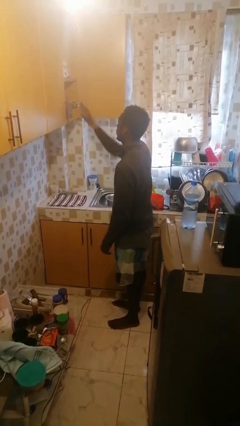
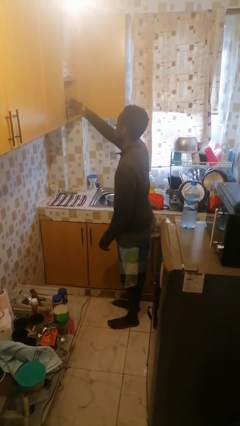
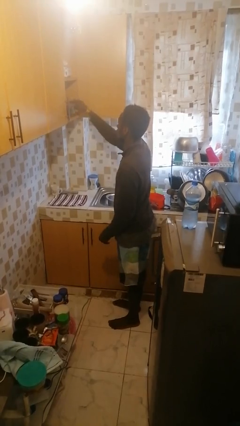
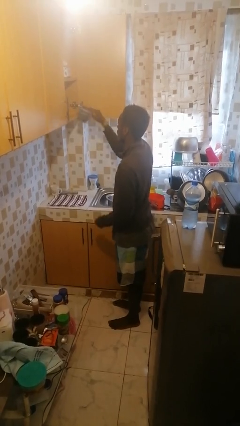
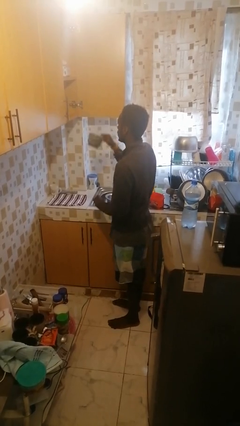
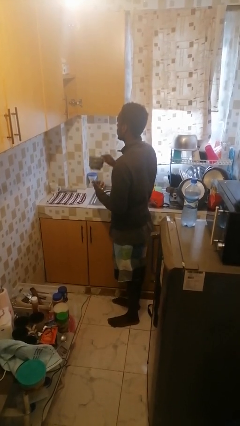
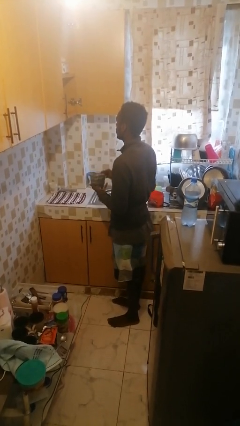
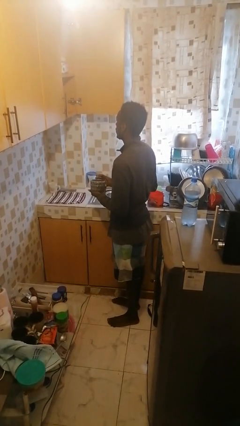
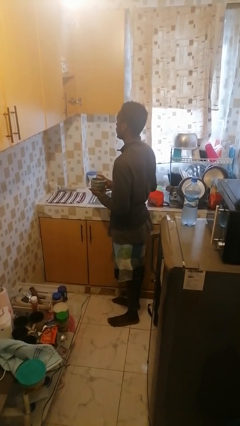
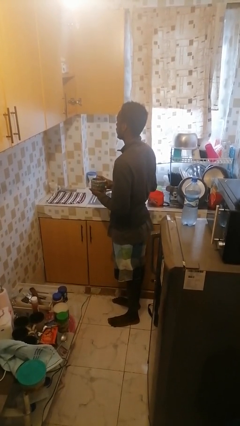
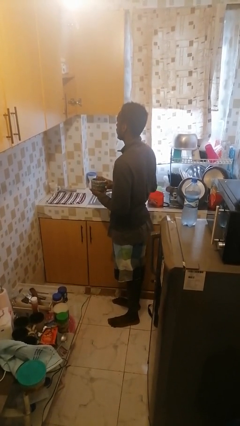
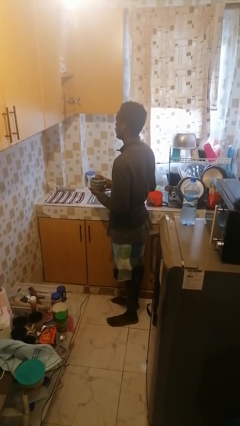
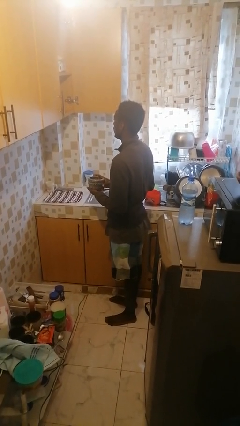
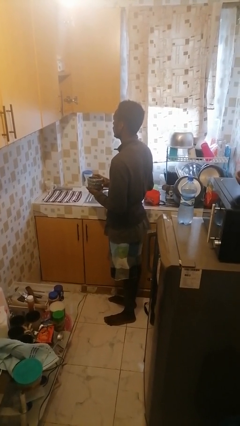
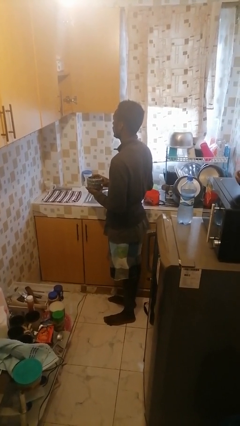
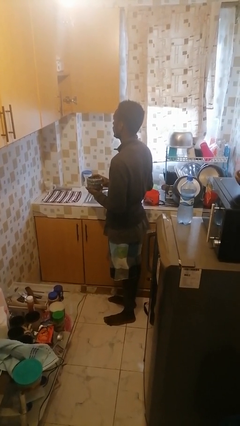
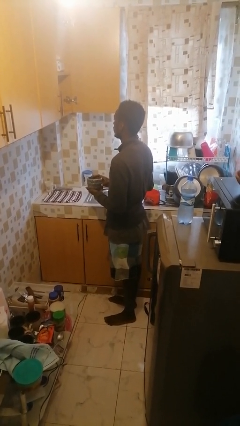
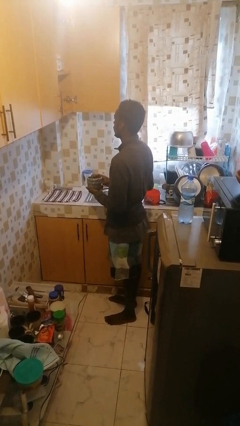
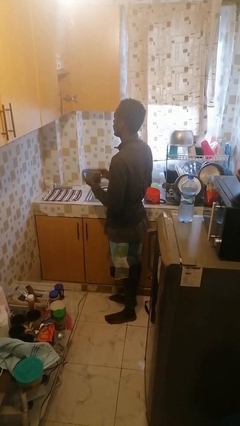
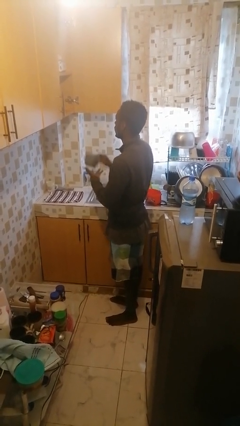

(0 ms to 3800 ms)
person picks up object from cabinet

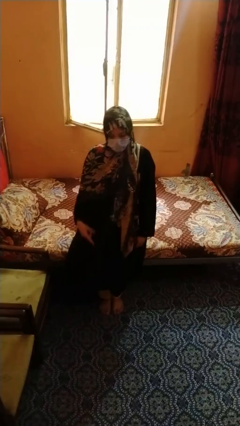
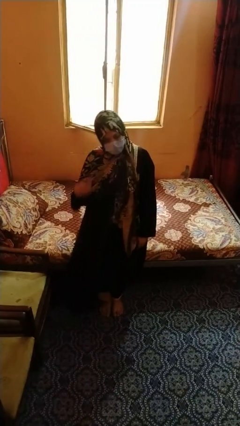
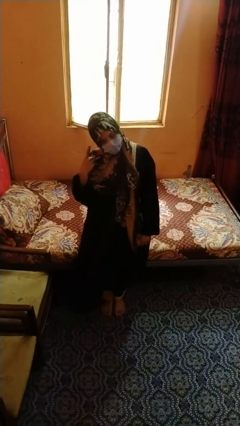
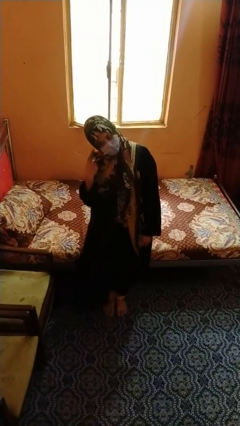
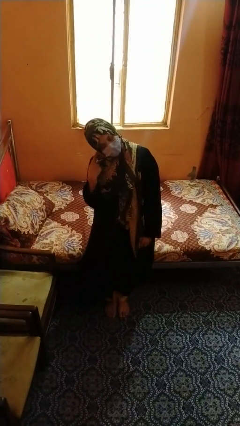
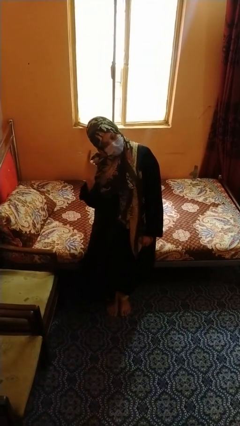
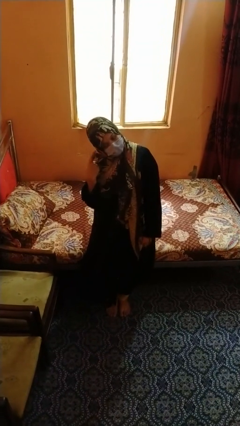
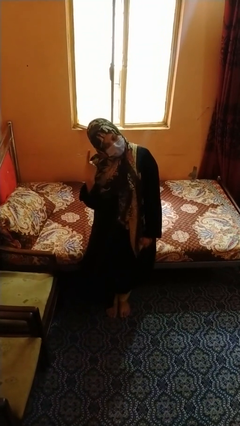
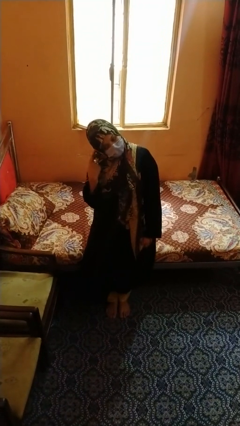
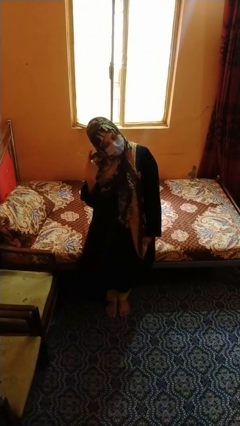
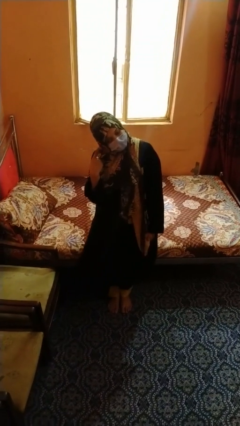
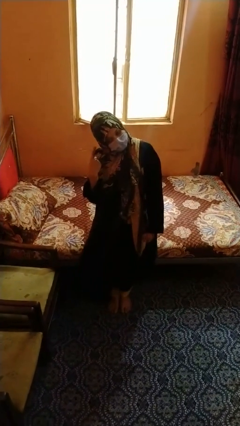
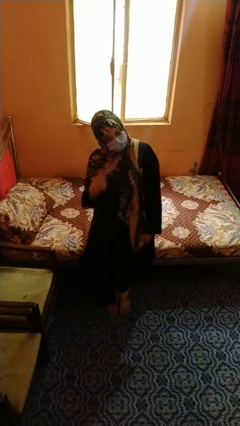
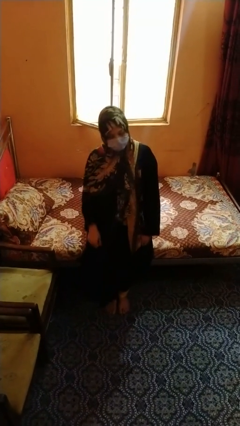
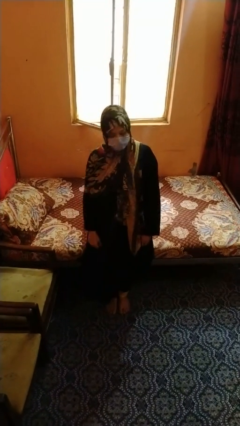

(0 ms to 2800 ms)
person gestures listen closely

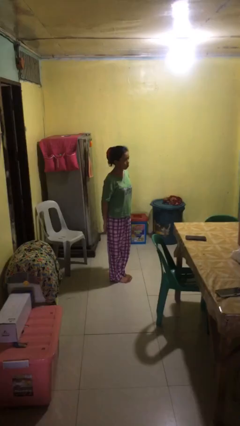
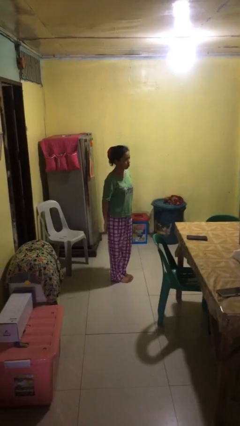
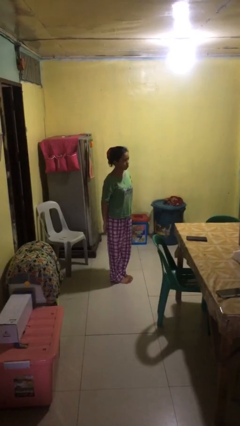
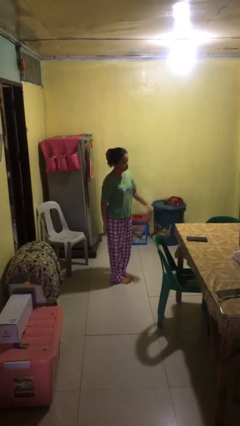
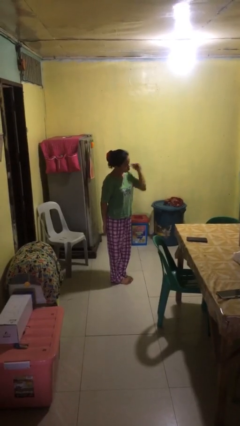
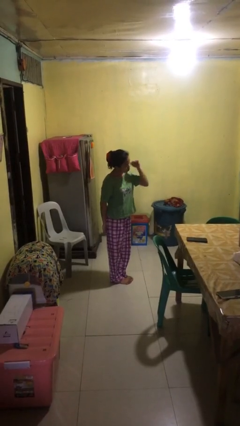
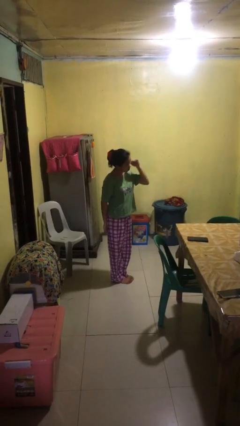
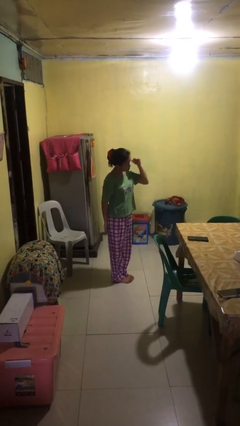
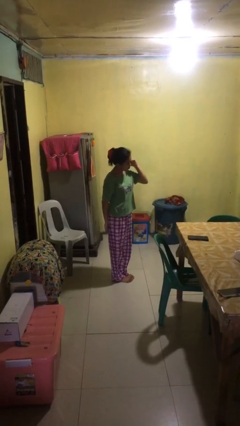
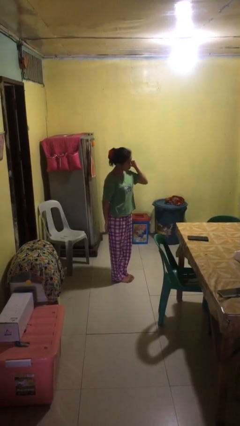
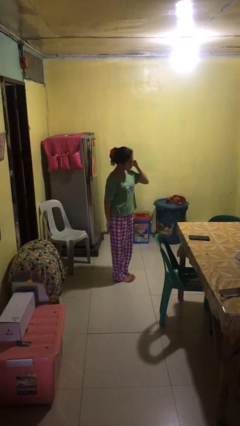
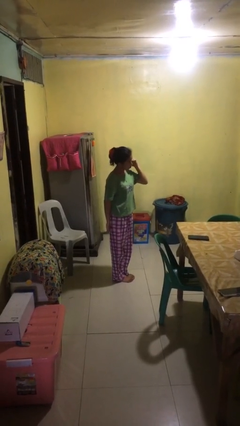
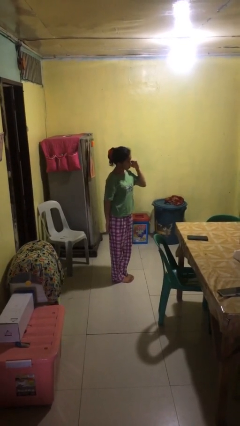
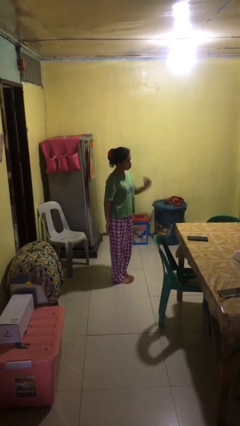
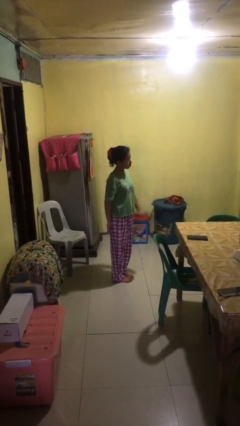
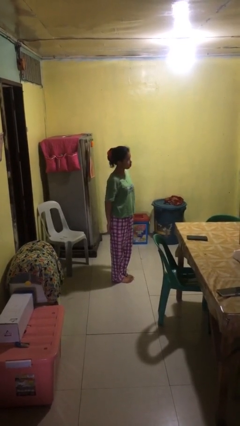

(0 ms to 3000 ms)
person gestures behind me

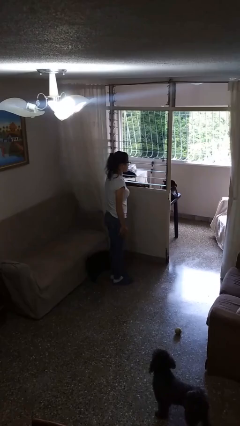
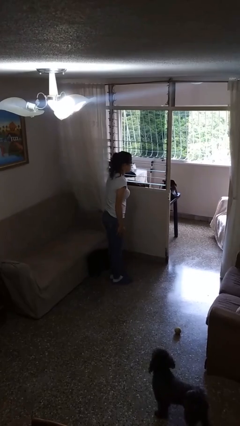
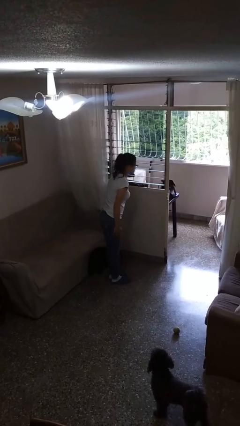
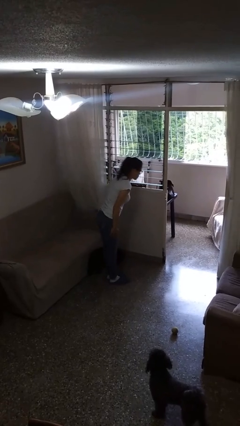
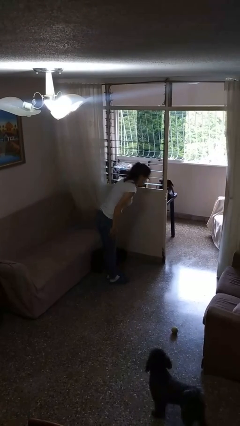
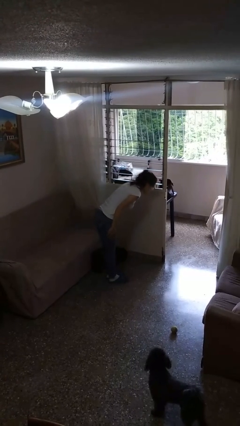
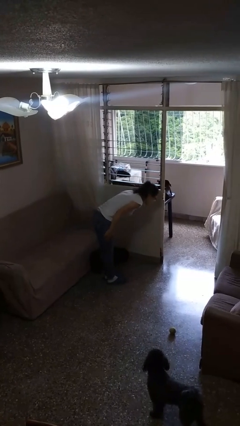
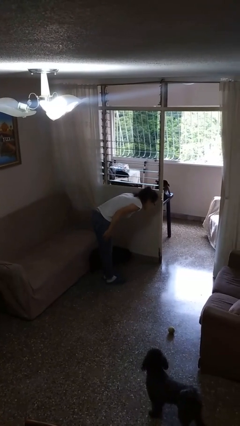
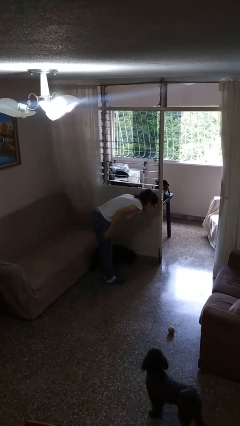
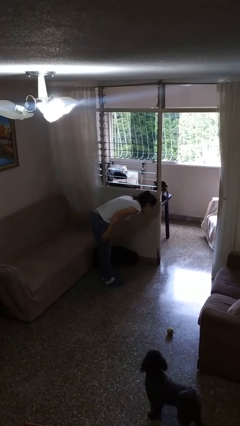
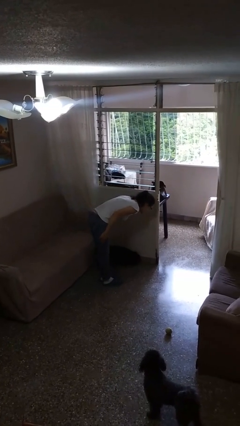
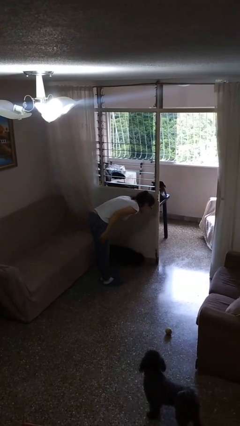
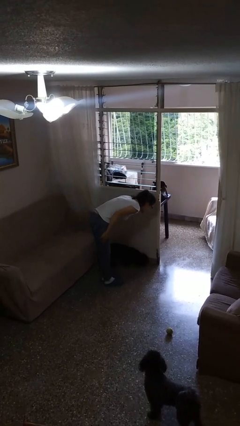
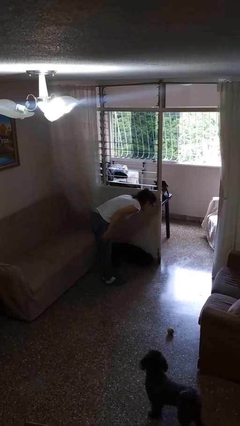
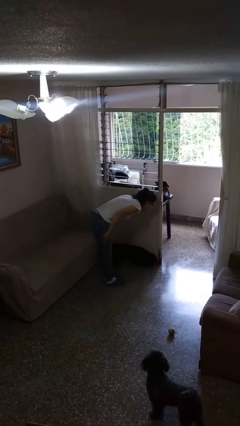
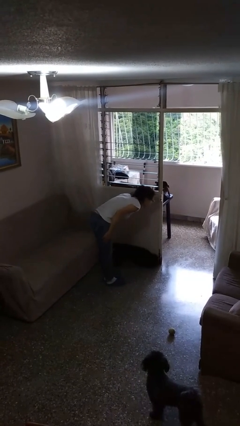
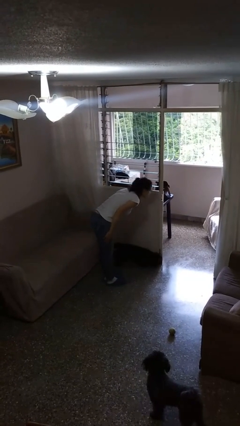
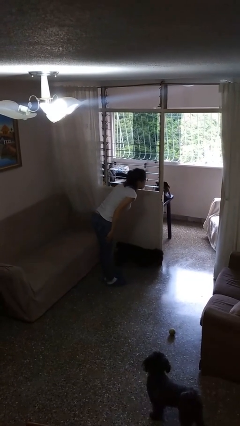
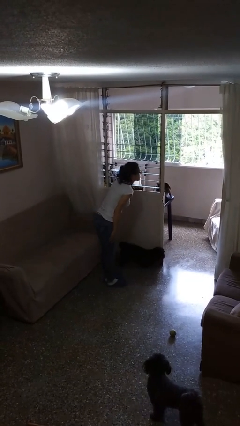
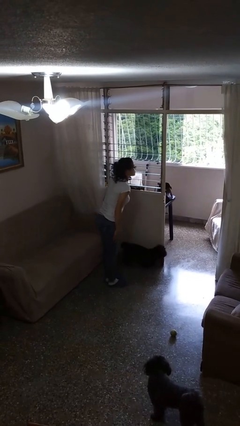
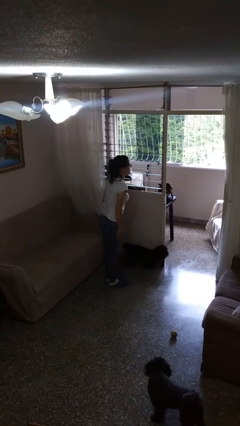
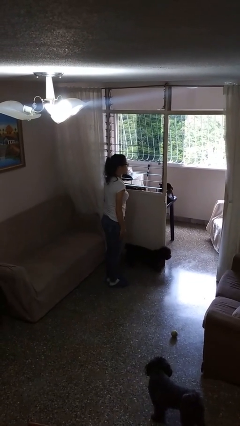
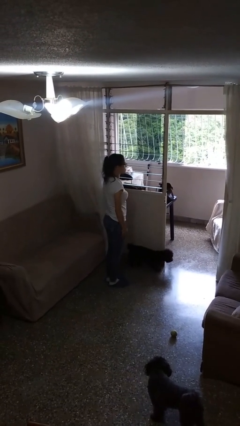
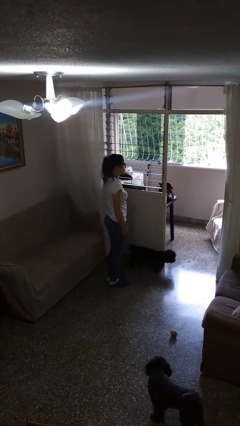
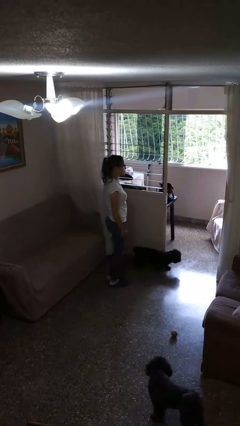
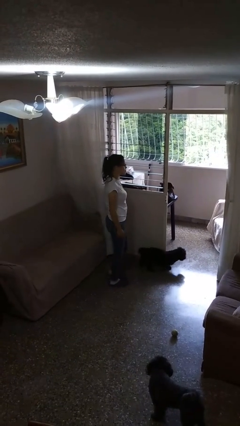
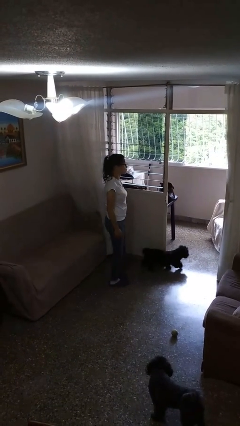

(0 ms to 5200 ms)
person bows

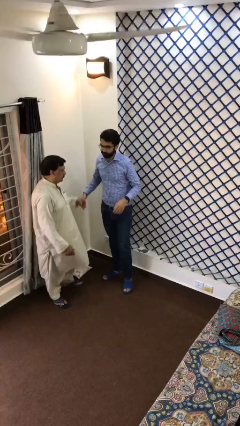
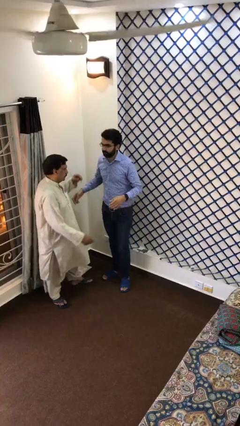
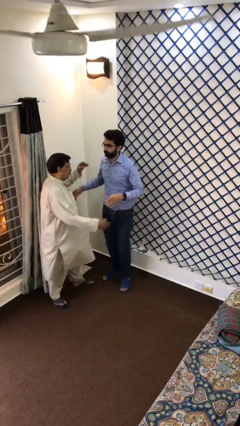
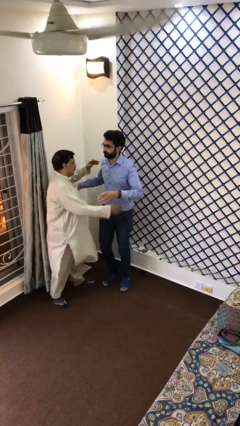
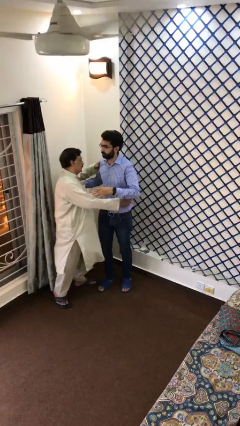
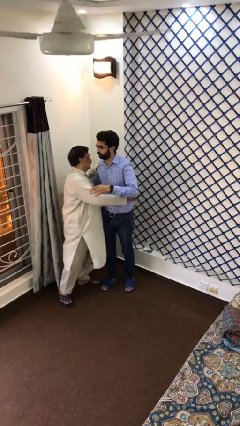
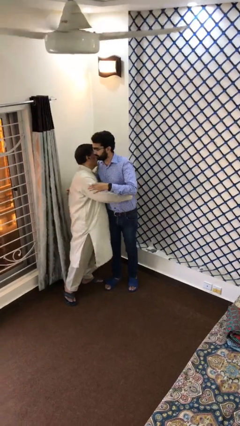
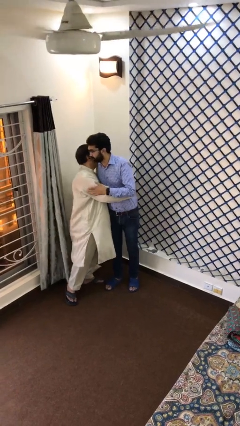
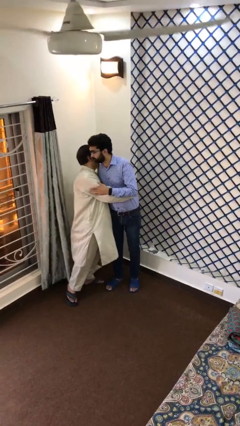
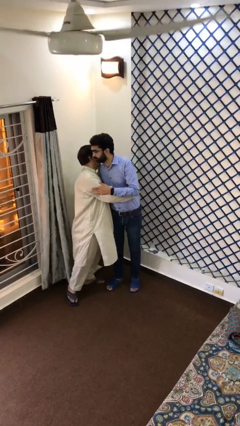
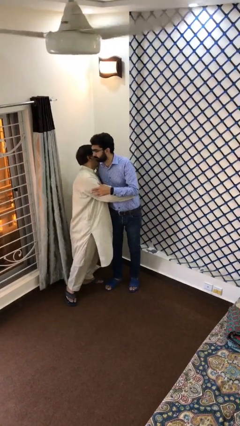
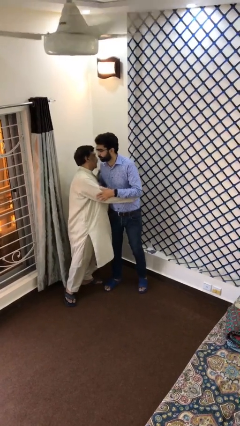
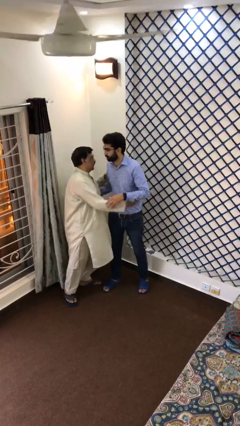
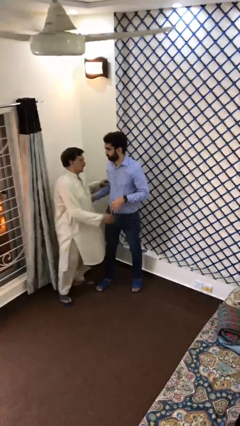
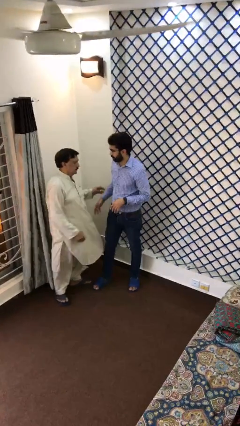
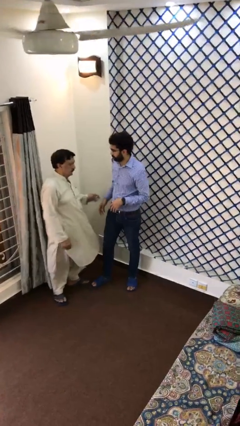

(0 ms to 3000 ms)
person embraces person
